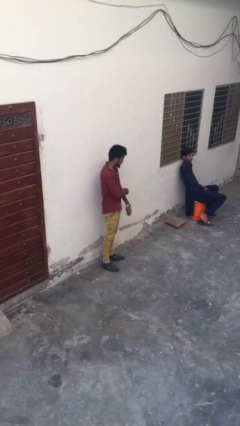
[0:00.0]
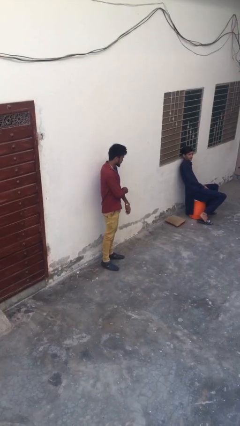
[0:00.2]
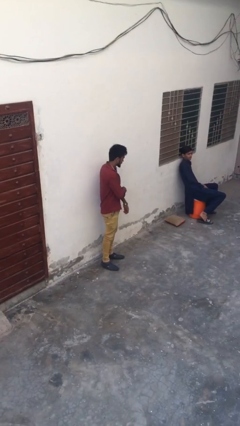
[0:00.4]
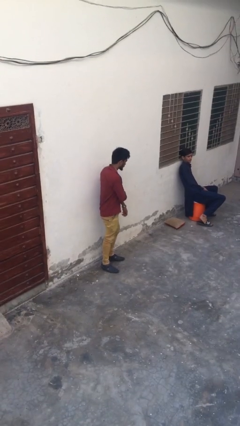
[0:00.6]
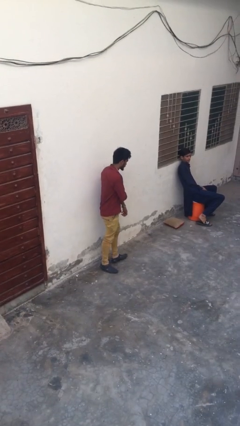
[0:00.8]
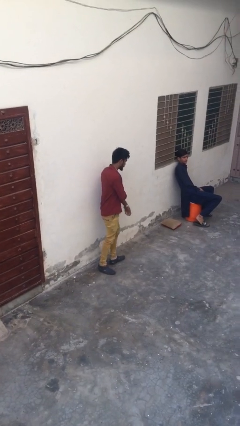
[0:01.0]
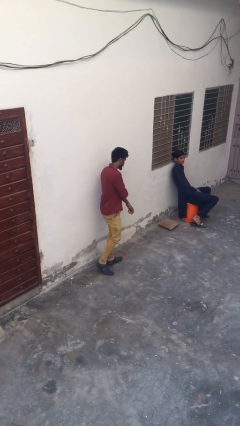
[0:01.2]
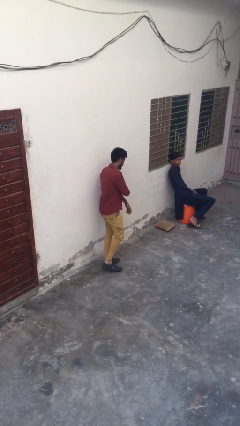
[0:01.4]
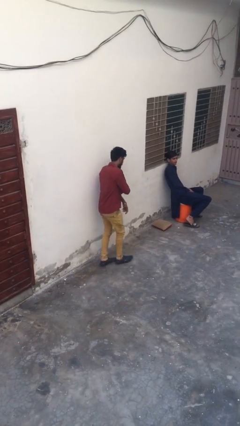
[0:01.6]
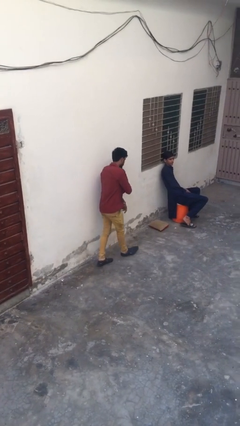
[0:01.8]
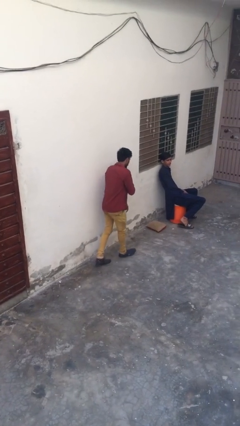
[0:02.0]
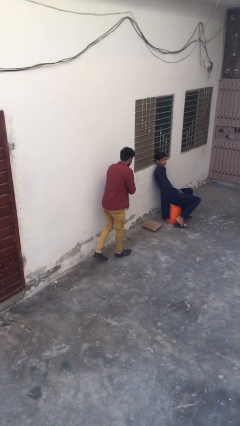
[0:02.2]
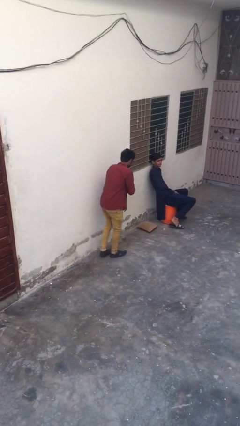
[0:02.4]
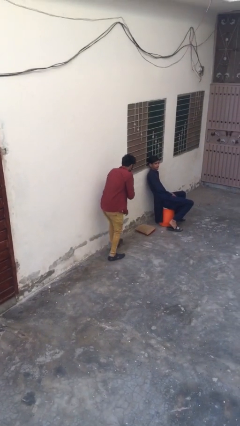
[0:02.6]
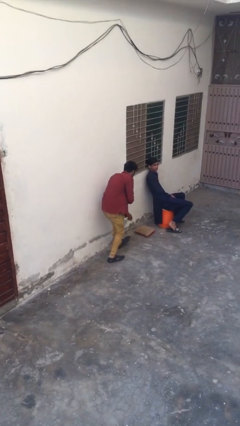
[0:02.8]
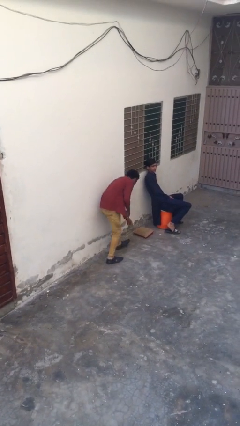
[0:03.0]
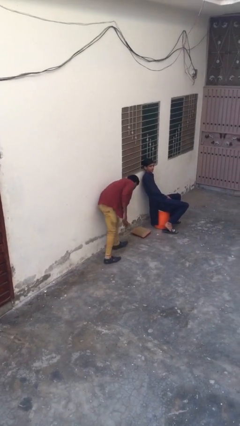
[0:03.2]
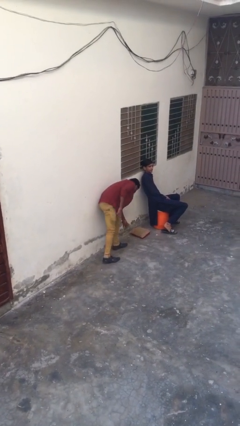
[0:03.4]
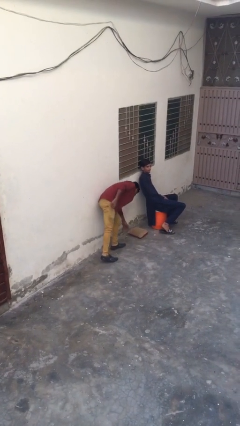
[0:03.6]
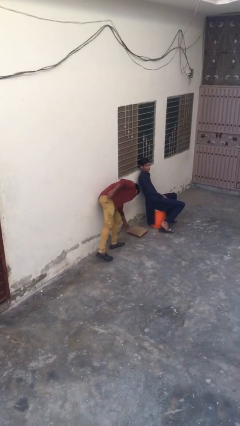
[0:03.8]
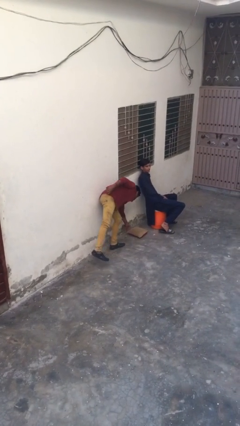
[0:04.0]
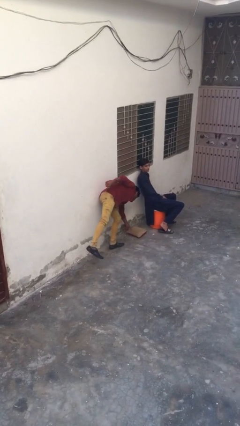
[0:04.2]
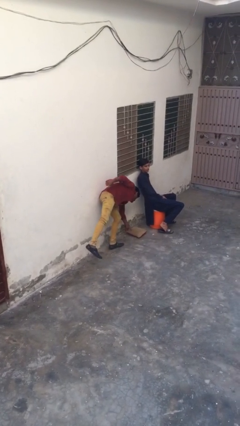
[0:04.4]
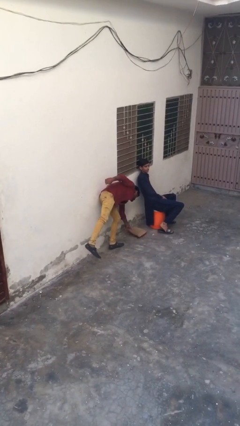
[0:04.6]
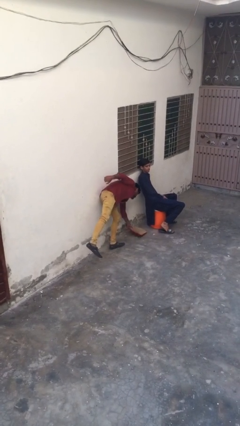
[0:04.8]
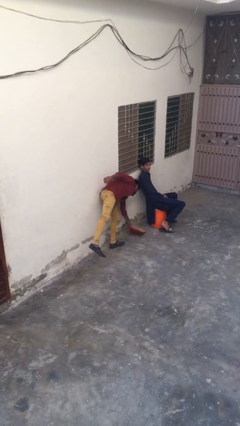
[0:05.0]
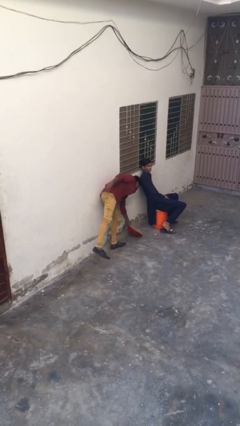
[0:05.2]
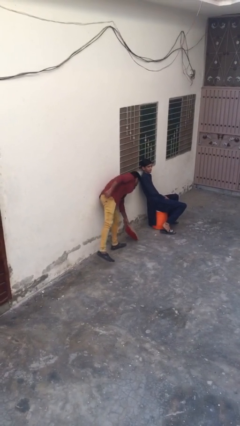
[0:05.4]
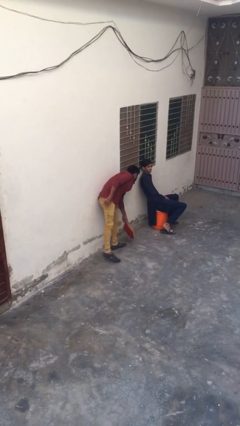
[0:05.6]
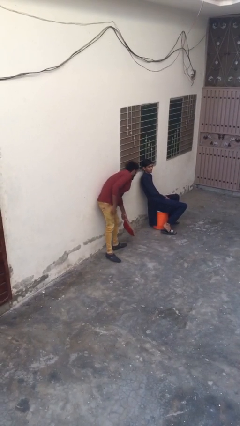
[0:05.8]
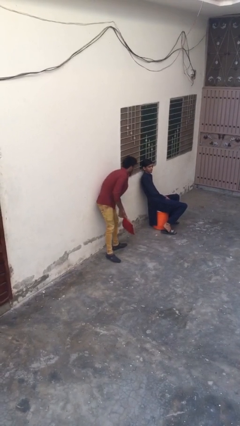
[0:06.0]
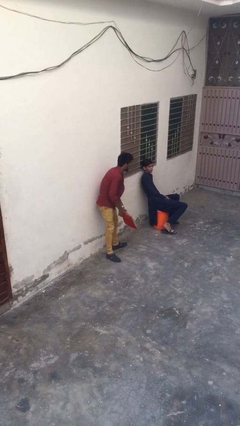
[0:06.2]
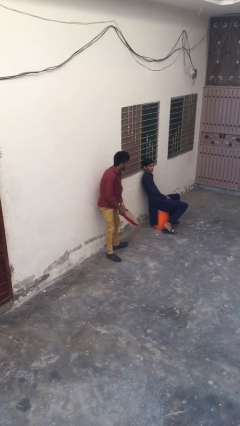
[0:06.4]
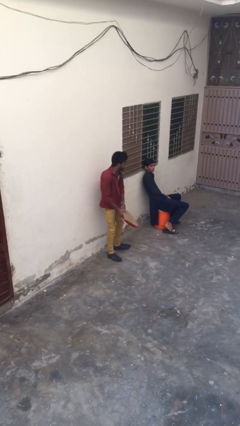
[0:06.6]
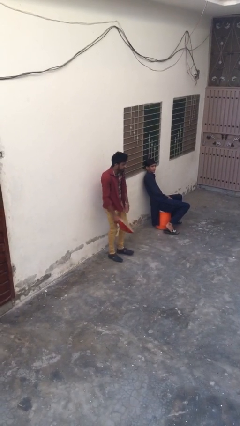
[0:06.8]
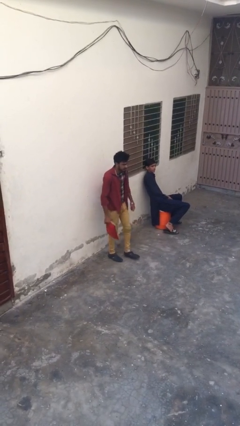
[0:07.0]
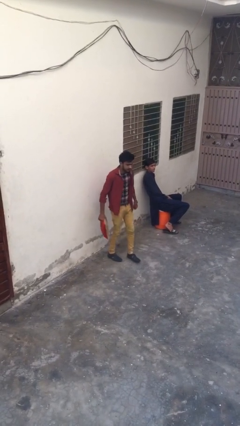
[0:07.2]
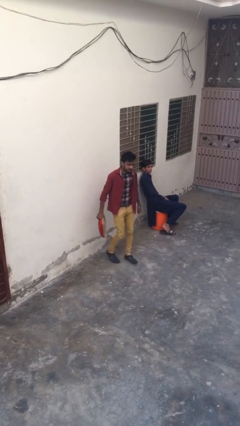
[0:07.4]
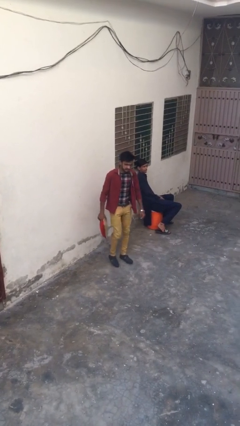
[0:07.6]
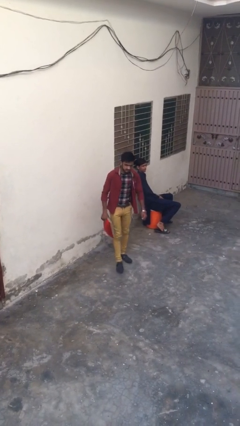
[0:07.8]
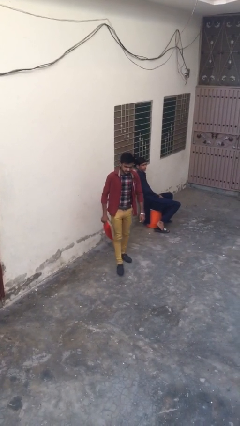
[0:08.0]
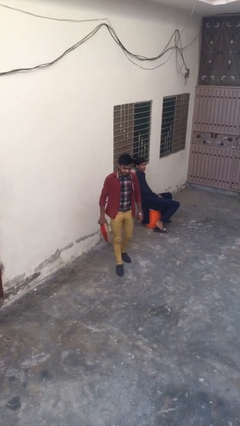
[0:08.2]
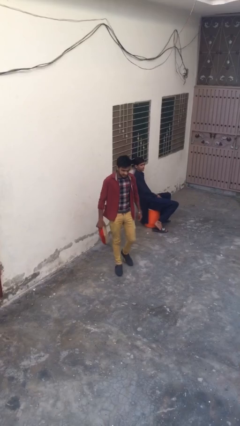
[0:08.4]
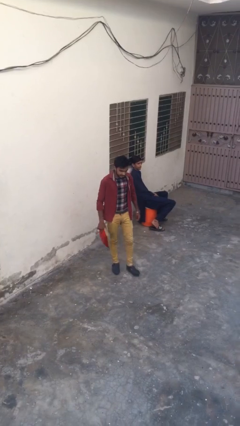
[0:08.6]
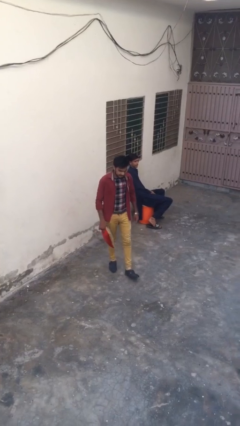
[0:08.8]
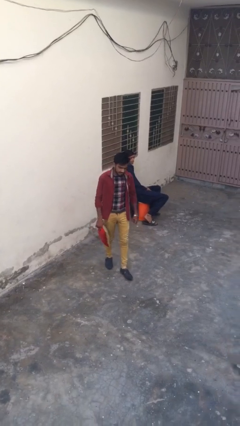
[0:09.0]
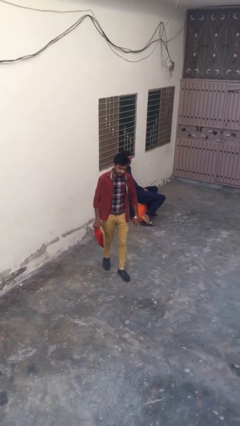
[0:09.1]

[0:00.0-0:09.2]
person steals object from person

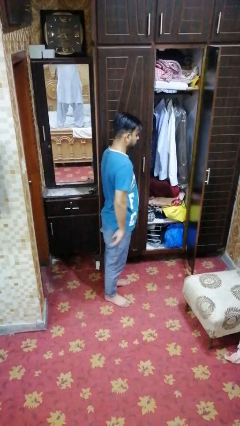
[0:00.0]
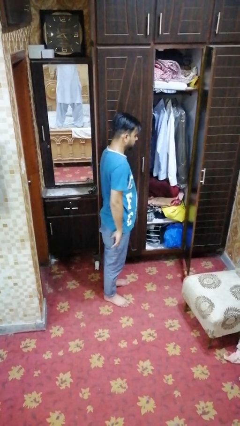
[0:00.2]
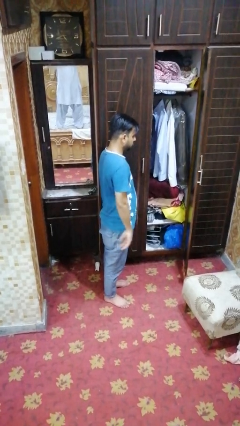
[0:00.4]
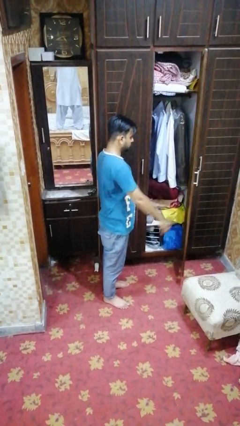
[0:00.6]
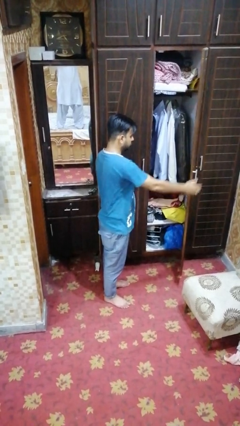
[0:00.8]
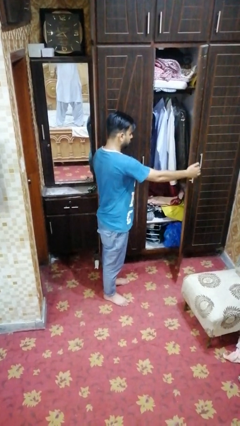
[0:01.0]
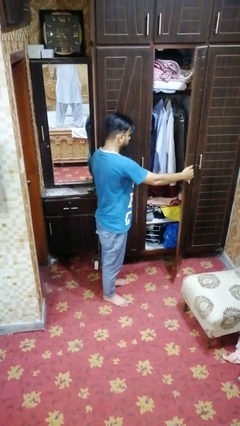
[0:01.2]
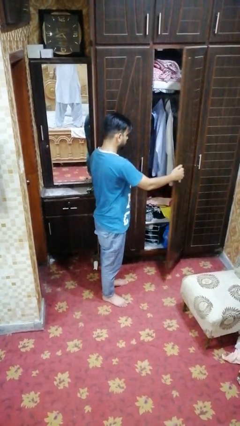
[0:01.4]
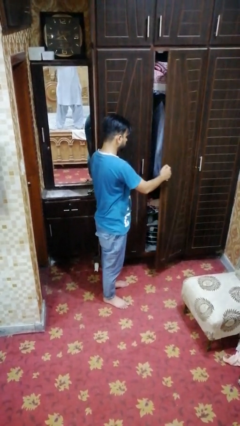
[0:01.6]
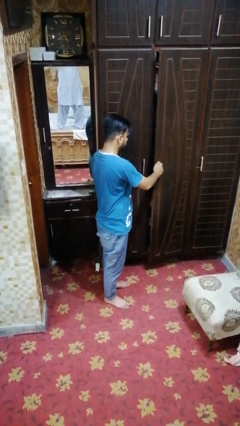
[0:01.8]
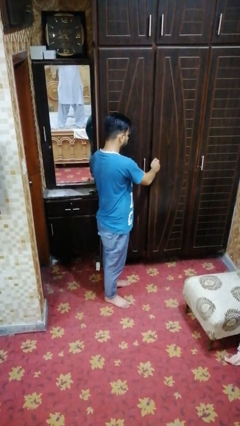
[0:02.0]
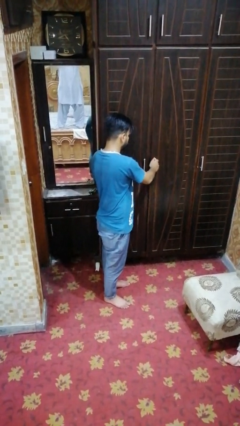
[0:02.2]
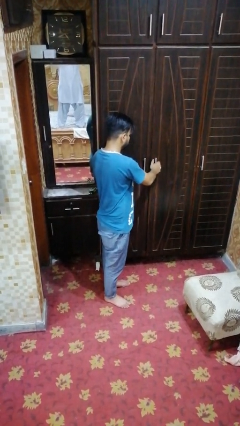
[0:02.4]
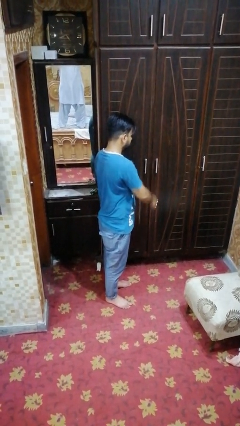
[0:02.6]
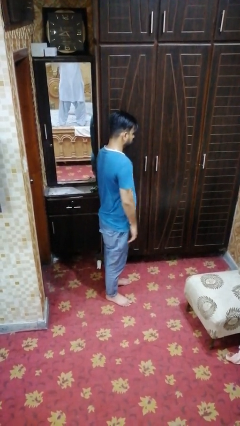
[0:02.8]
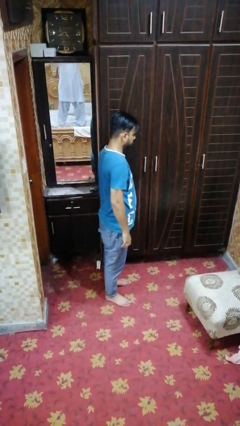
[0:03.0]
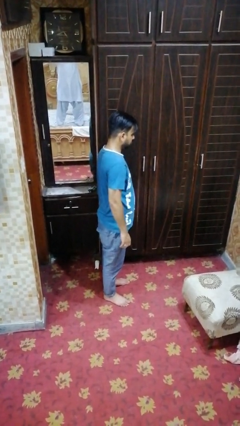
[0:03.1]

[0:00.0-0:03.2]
person closes closet door

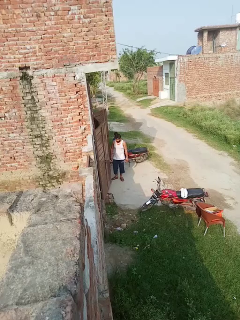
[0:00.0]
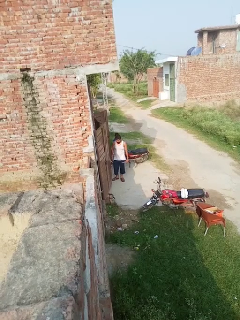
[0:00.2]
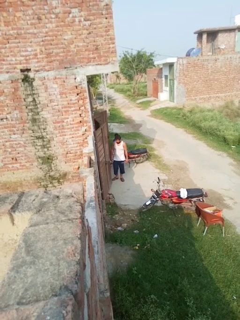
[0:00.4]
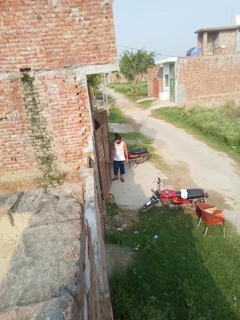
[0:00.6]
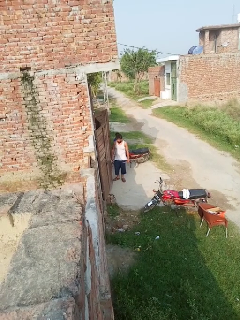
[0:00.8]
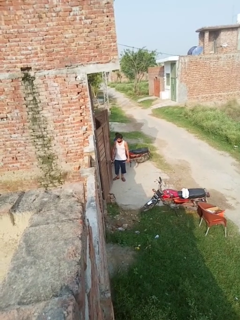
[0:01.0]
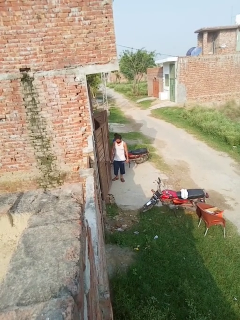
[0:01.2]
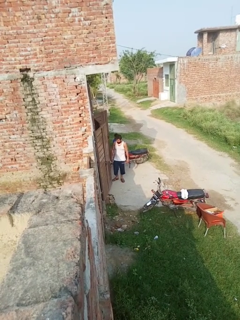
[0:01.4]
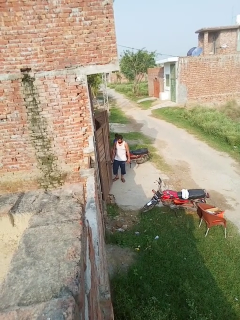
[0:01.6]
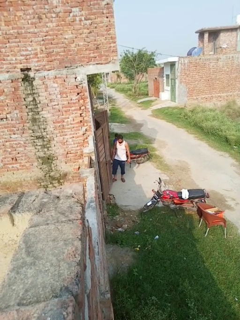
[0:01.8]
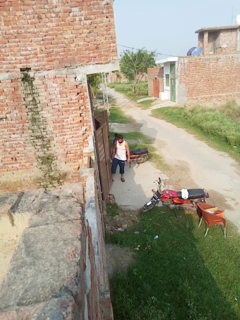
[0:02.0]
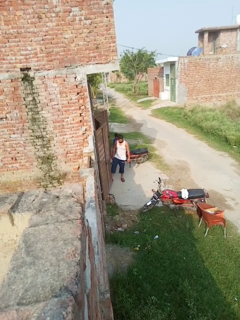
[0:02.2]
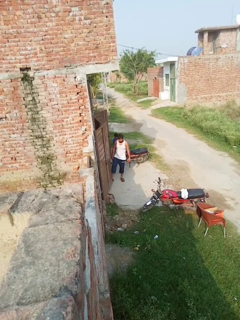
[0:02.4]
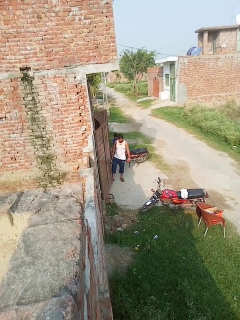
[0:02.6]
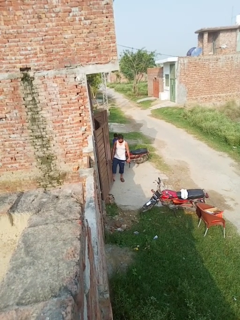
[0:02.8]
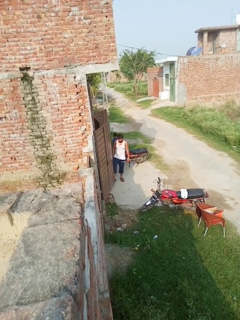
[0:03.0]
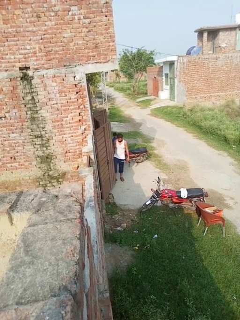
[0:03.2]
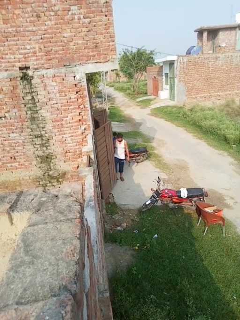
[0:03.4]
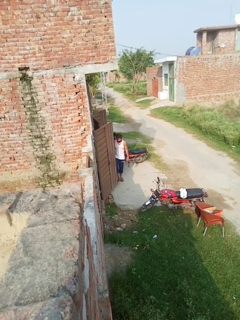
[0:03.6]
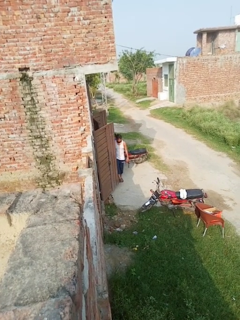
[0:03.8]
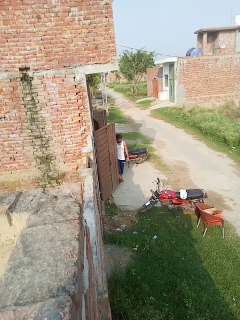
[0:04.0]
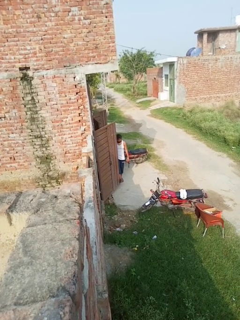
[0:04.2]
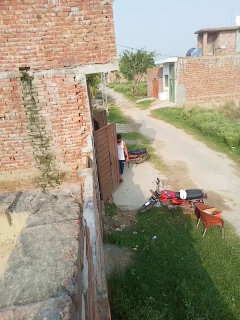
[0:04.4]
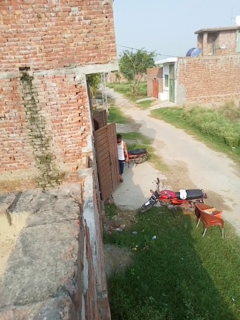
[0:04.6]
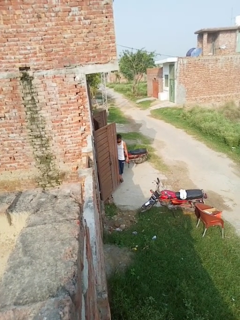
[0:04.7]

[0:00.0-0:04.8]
person opens facility door

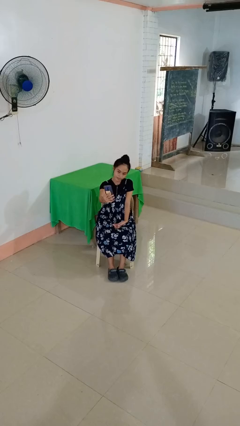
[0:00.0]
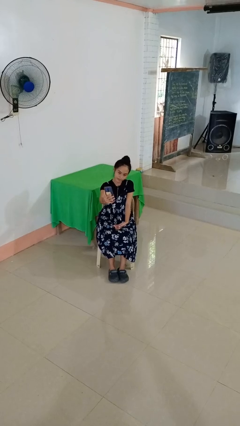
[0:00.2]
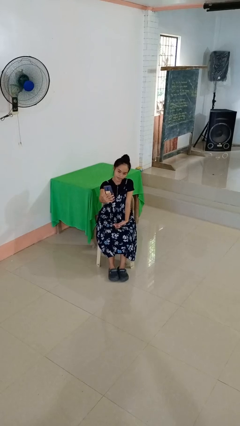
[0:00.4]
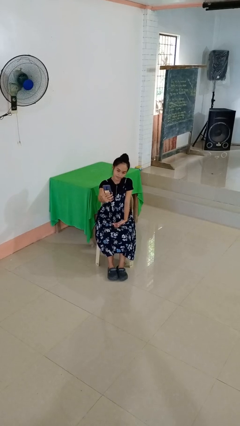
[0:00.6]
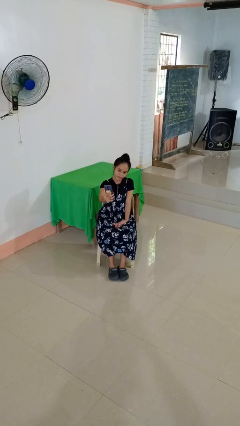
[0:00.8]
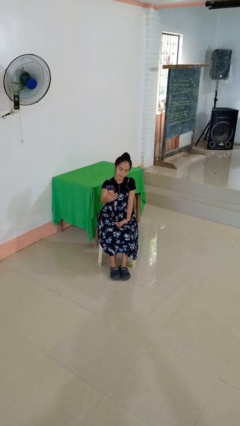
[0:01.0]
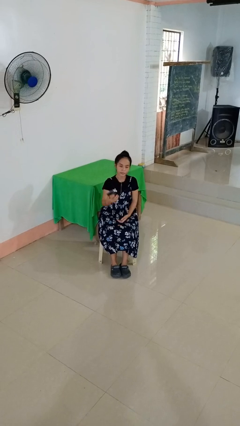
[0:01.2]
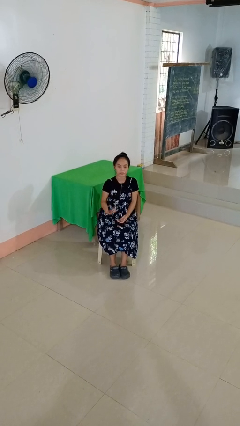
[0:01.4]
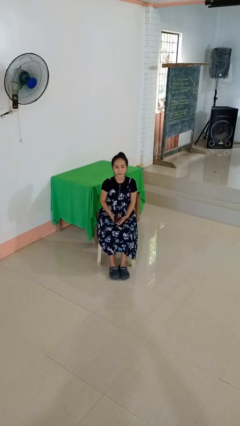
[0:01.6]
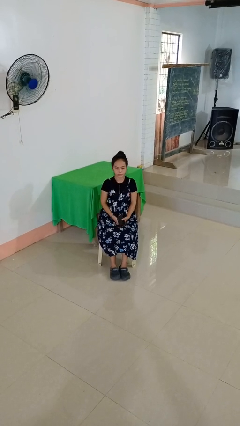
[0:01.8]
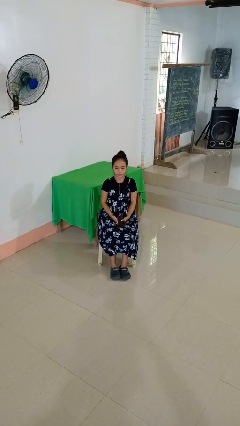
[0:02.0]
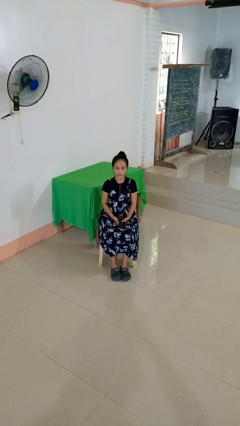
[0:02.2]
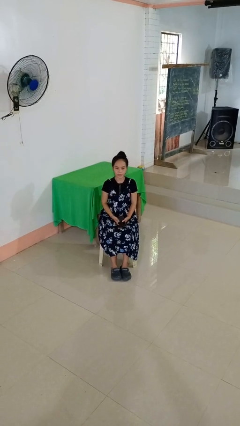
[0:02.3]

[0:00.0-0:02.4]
person takes selfie
